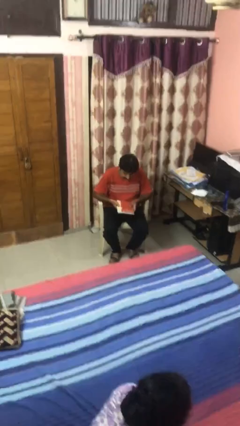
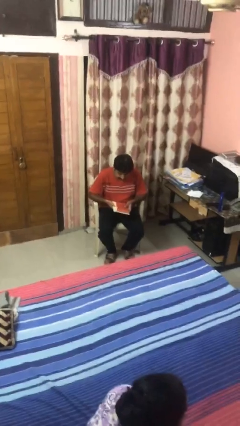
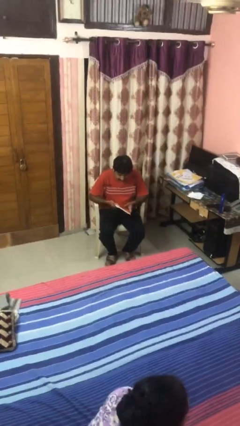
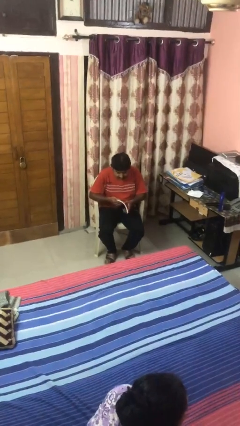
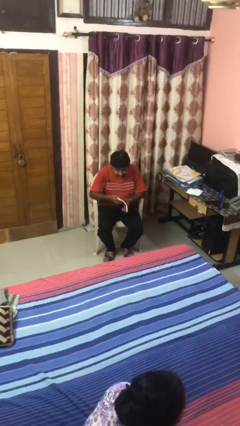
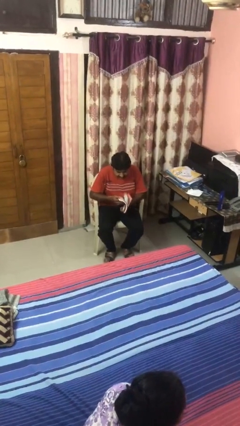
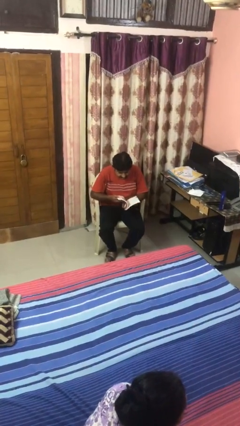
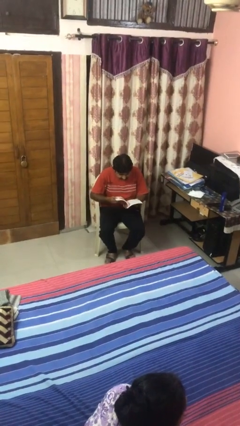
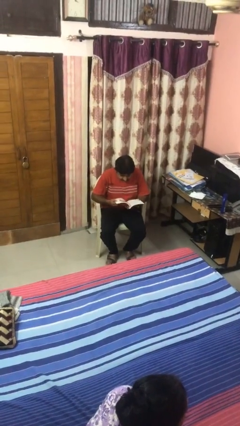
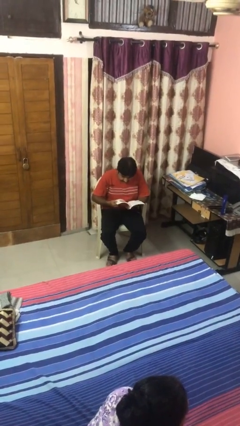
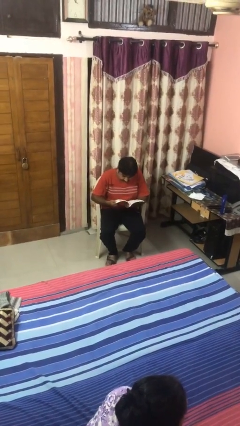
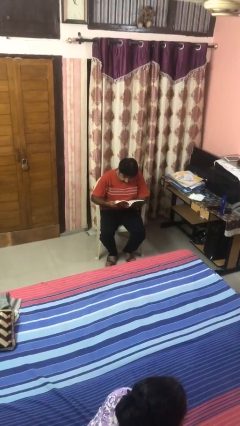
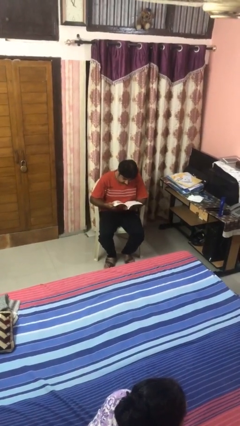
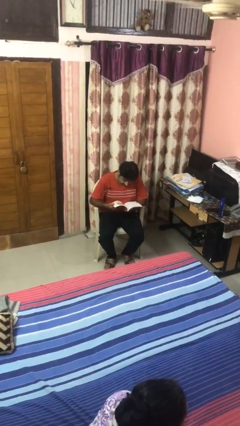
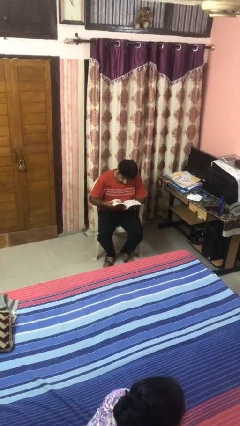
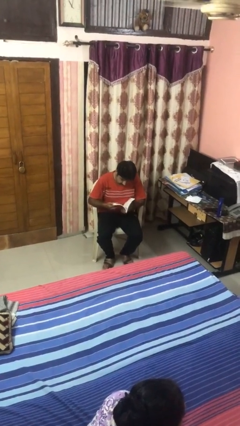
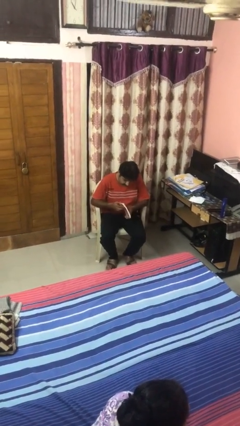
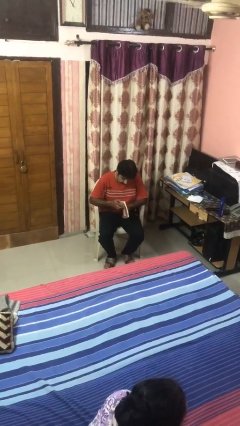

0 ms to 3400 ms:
person reads book

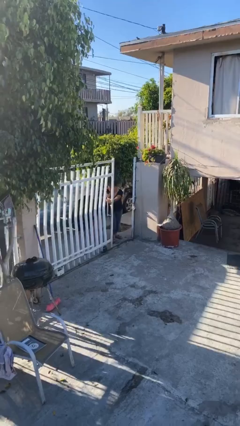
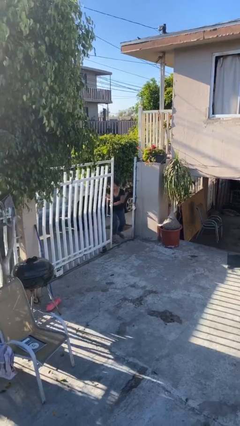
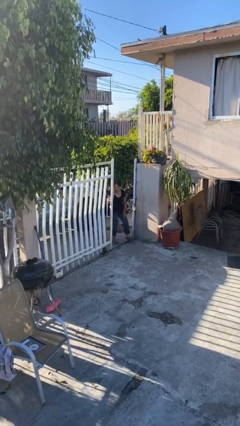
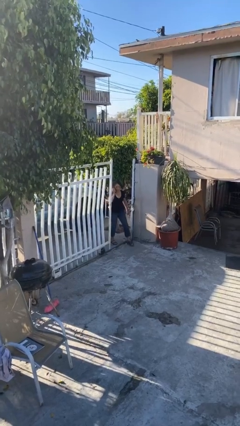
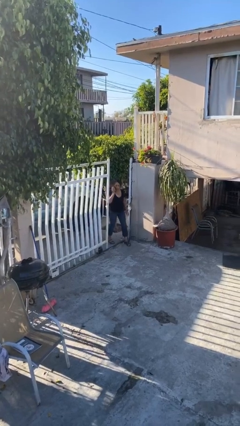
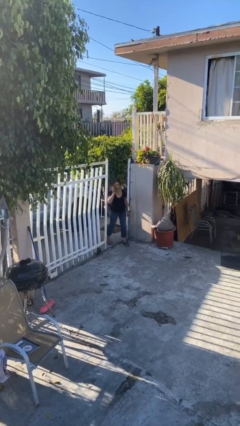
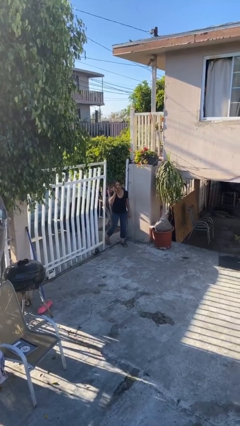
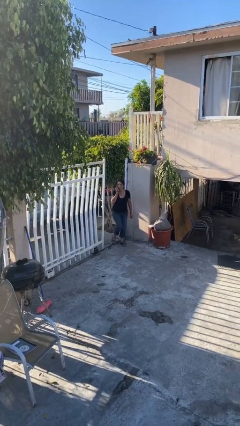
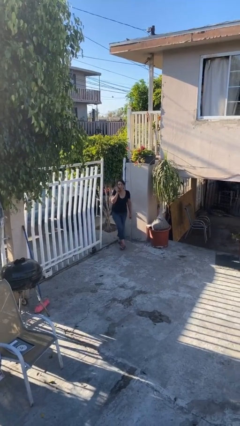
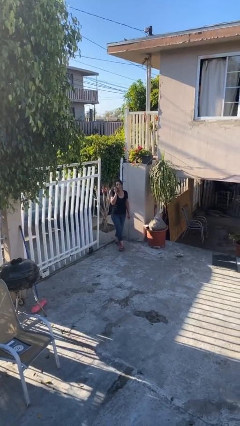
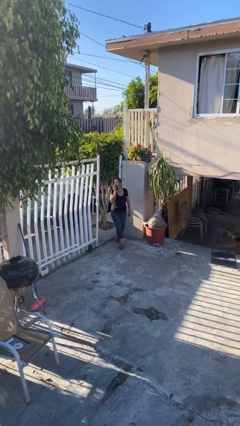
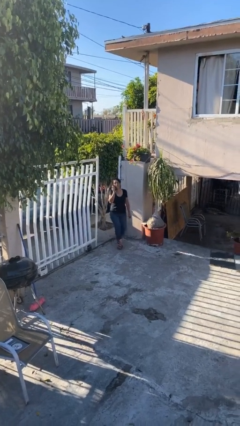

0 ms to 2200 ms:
person enters scene through structure

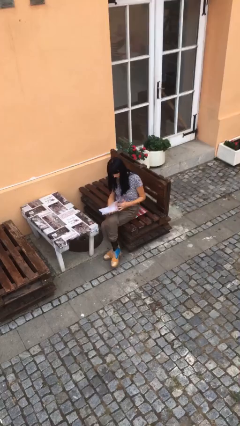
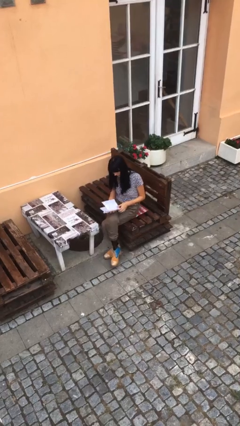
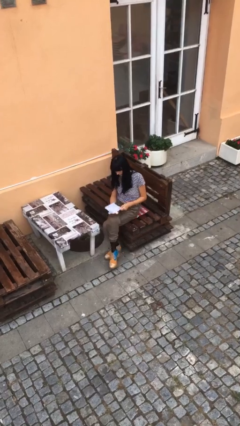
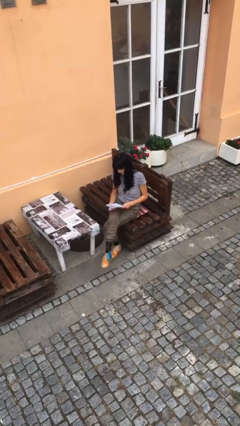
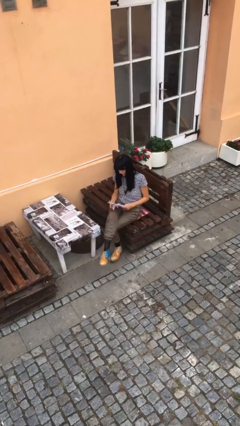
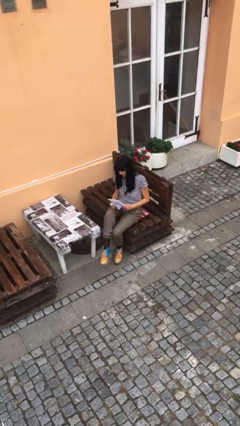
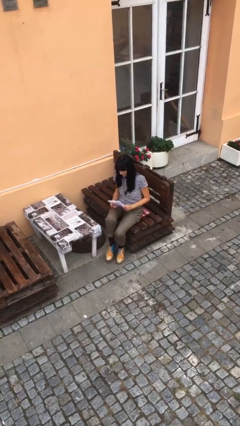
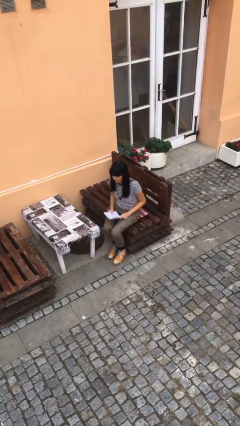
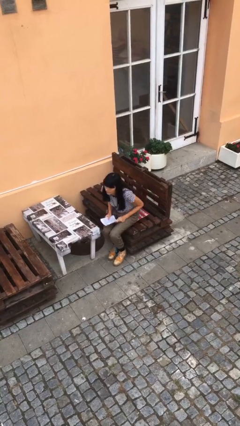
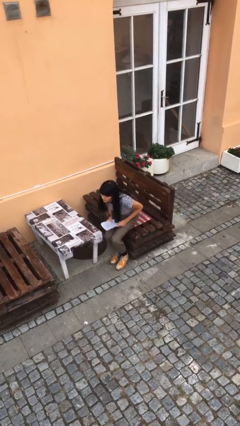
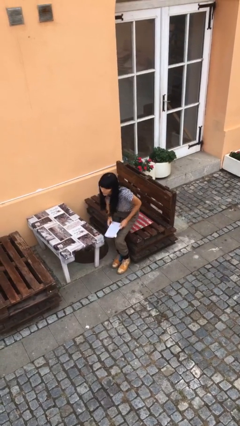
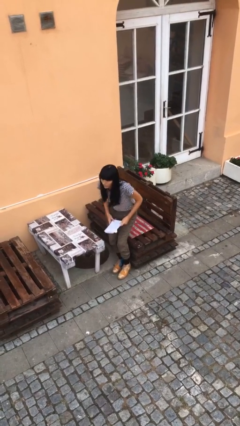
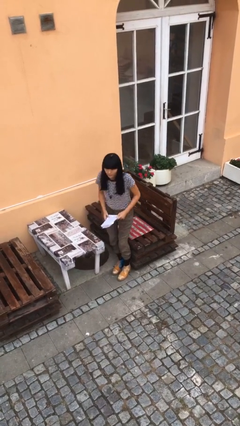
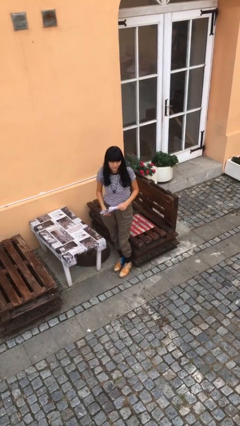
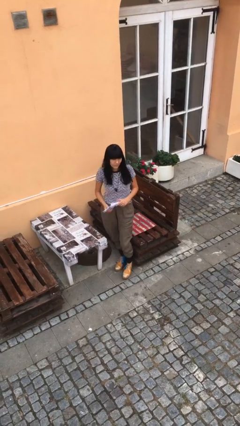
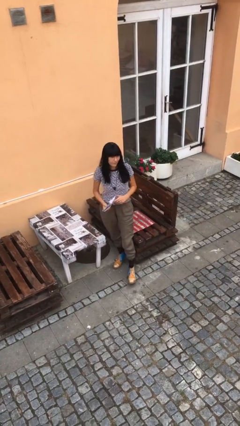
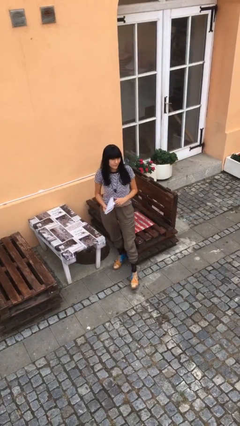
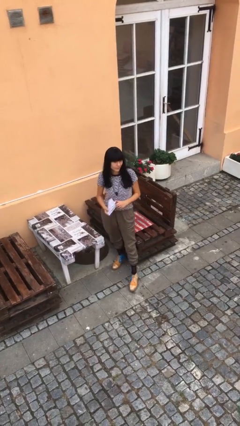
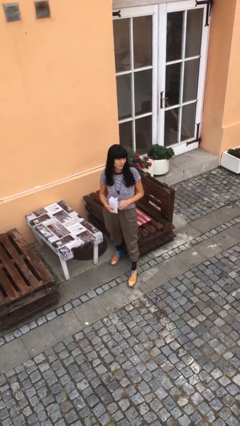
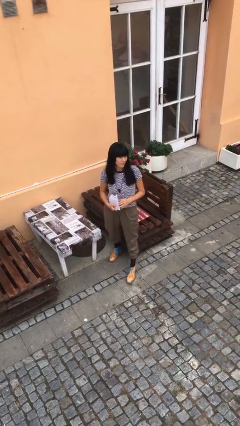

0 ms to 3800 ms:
person stands up

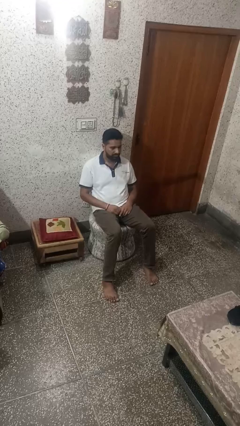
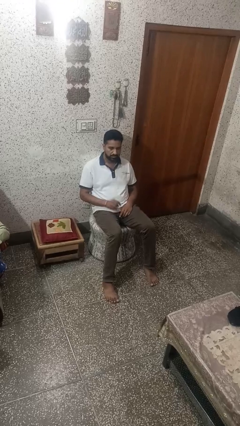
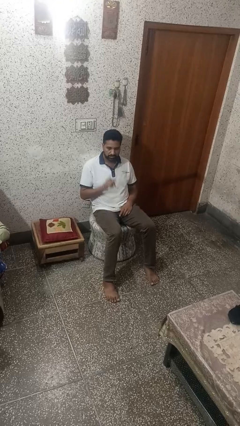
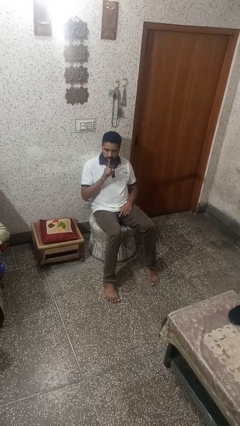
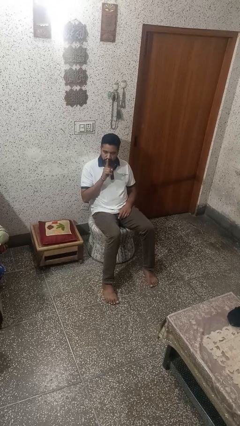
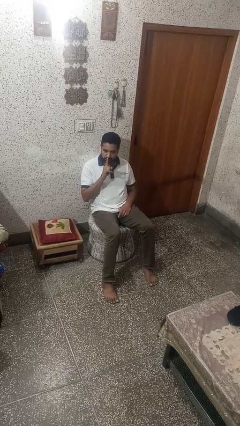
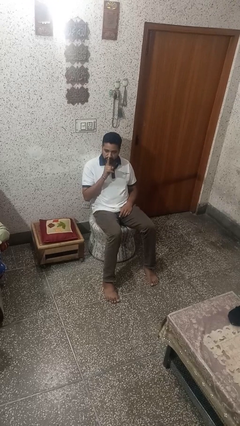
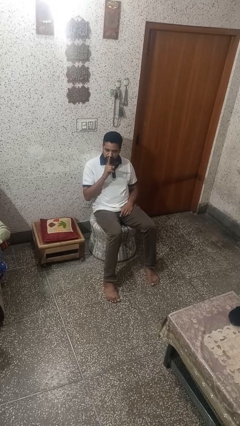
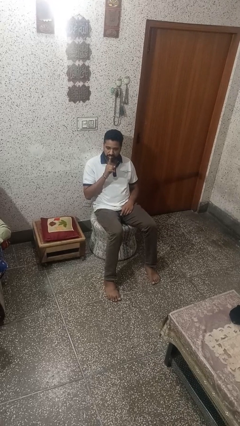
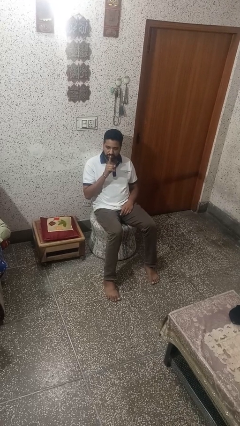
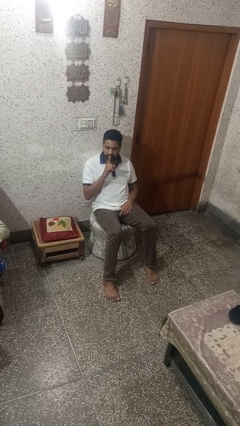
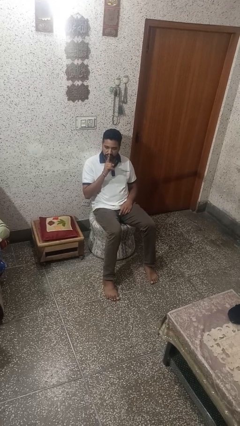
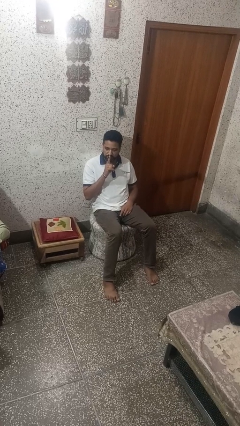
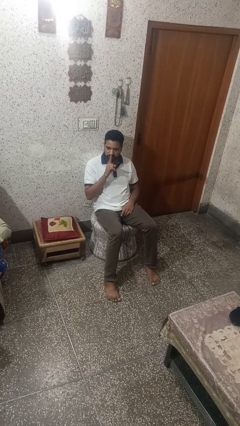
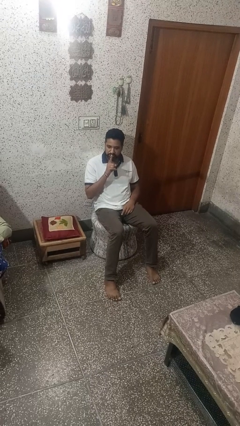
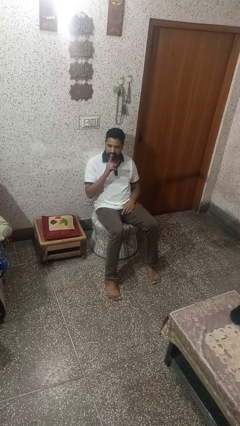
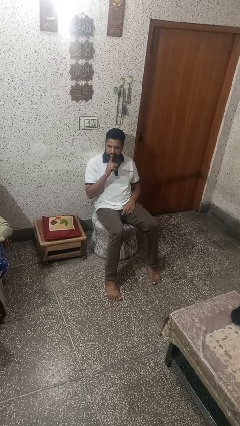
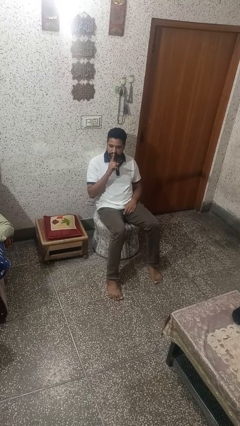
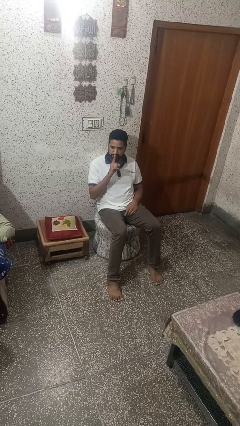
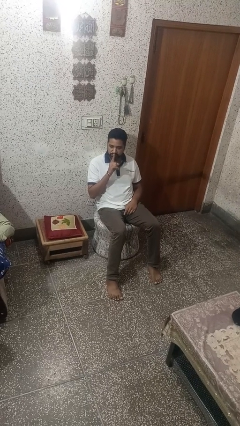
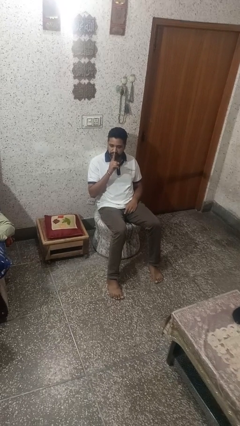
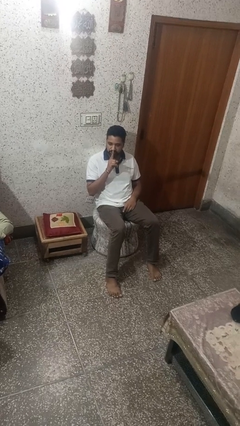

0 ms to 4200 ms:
person gestures be quiet

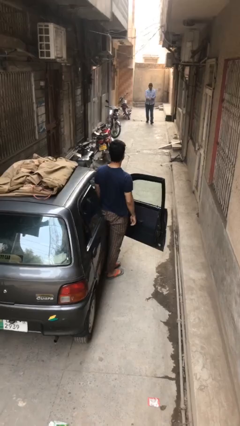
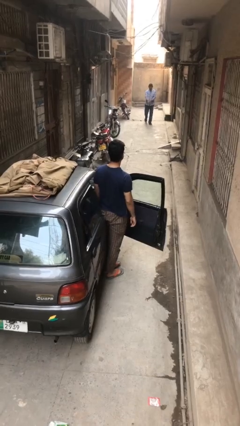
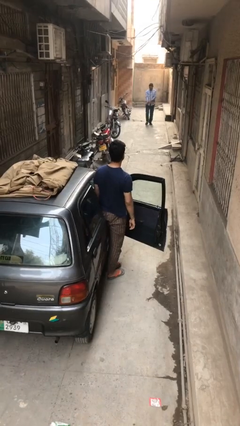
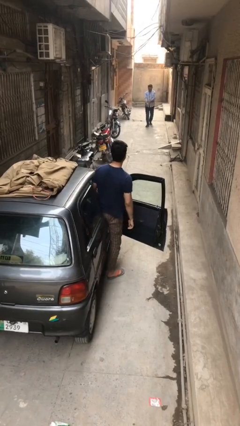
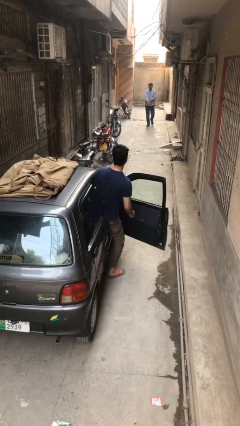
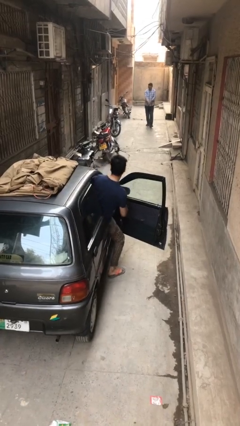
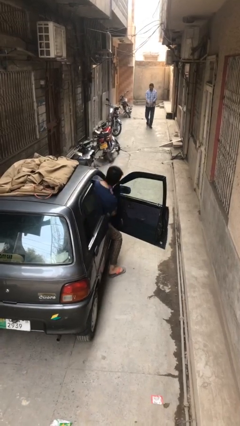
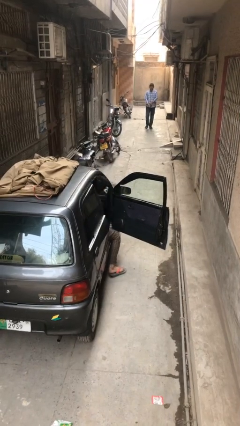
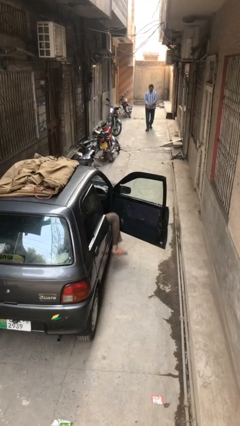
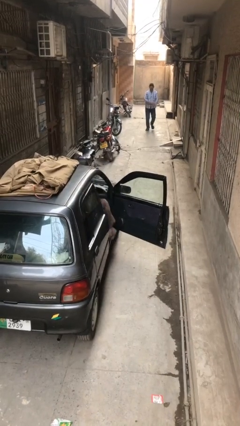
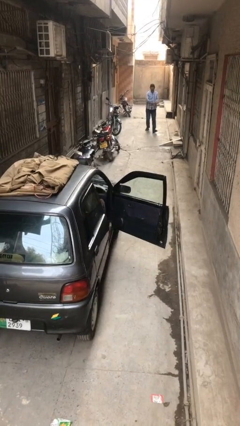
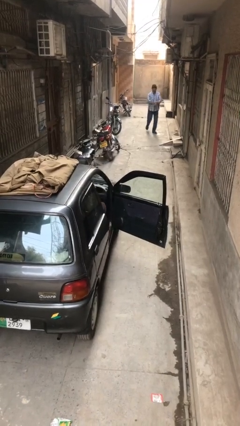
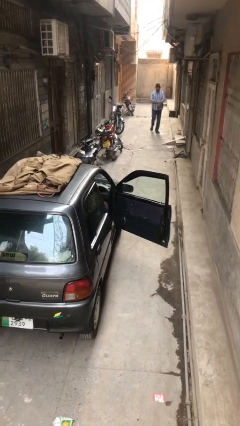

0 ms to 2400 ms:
person enters car

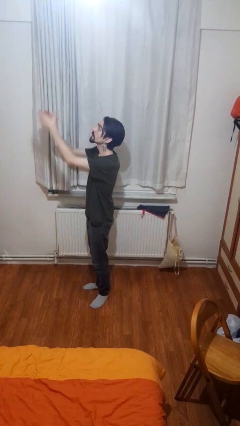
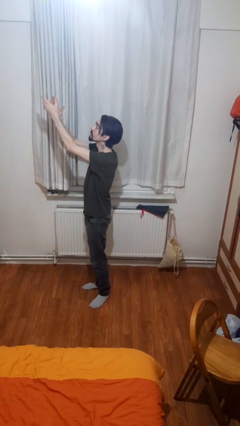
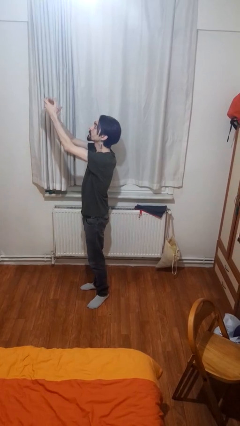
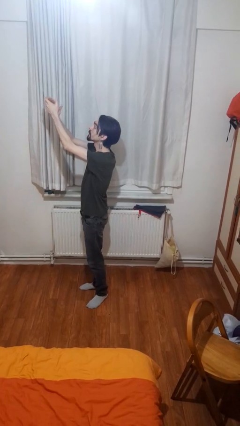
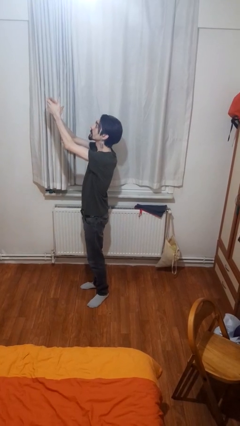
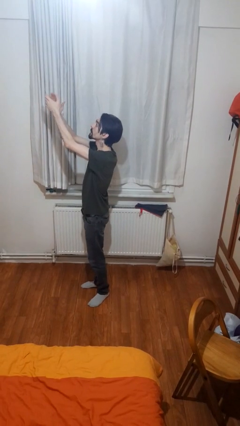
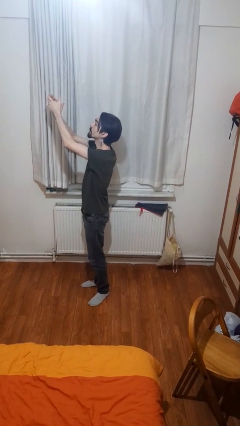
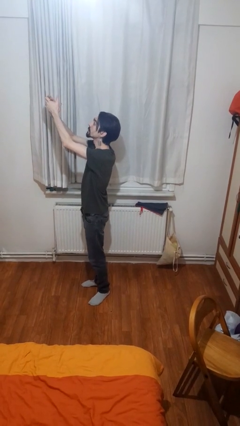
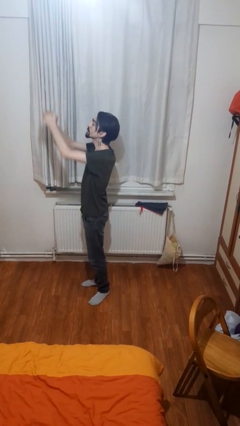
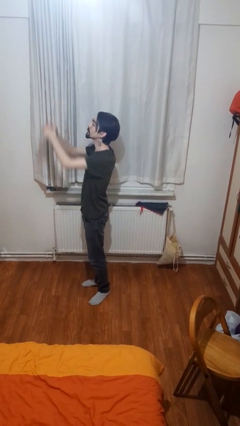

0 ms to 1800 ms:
person claps hands
